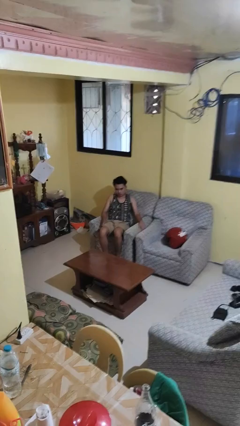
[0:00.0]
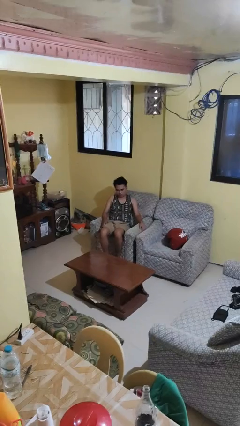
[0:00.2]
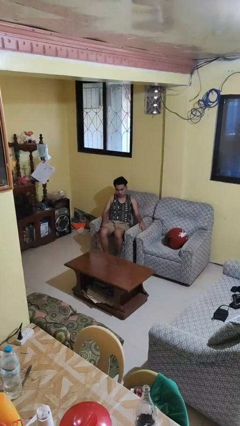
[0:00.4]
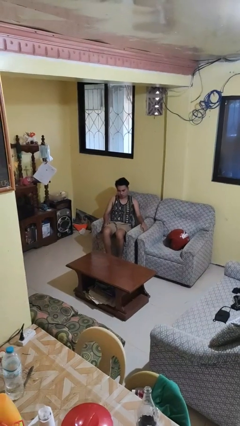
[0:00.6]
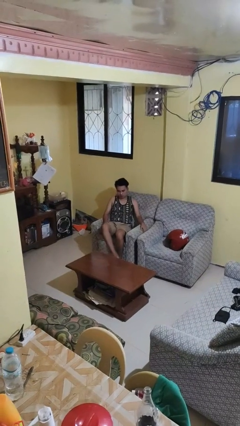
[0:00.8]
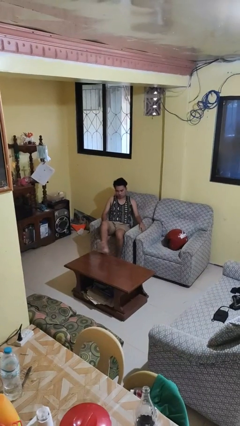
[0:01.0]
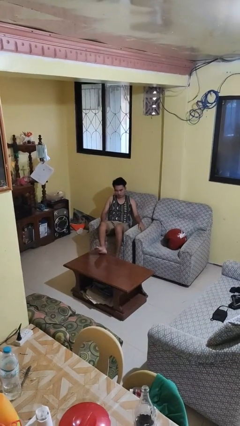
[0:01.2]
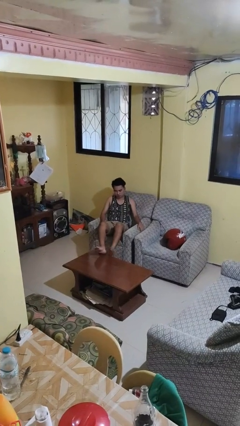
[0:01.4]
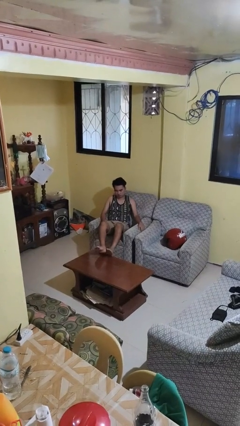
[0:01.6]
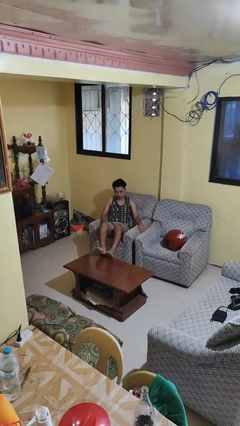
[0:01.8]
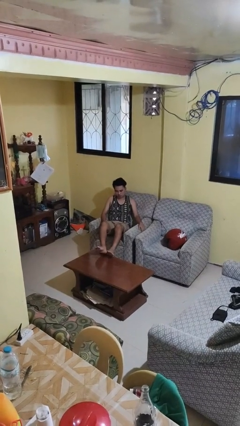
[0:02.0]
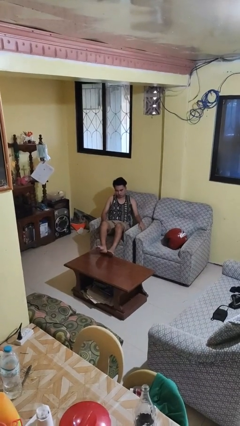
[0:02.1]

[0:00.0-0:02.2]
person puts feet up

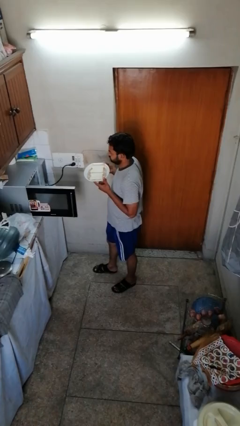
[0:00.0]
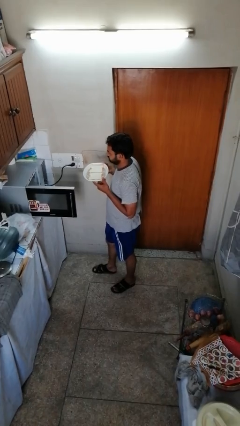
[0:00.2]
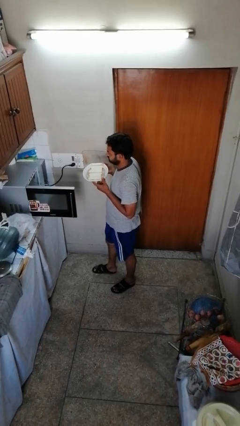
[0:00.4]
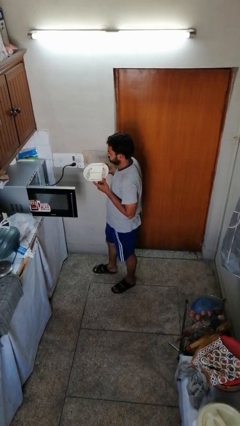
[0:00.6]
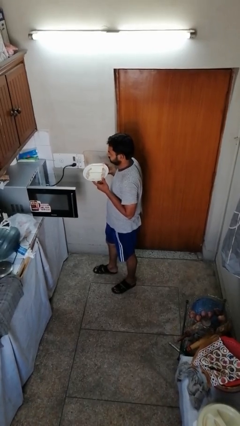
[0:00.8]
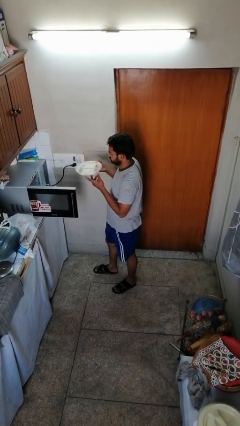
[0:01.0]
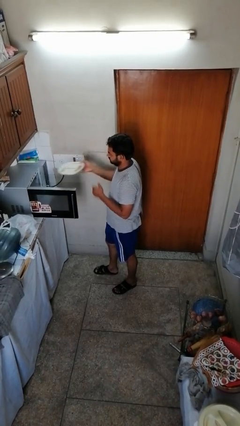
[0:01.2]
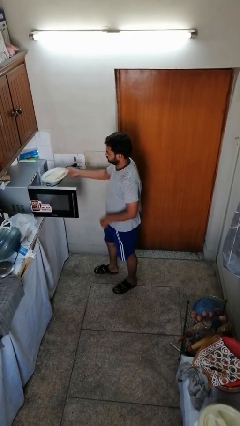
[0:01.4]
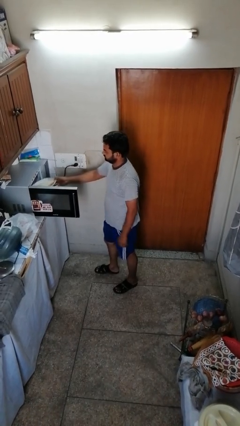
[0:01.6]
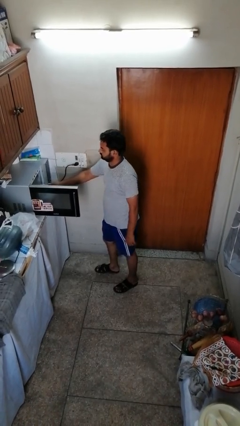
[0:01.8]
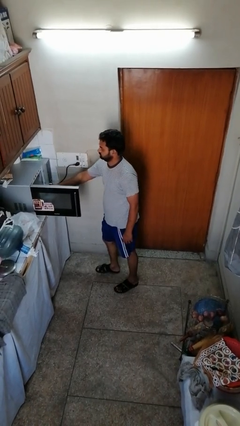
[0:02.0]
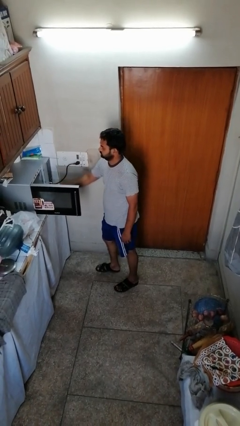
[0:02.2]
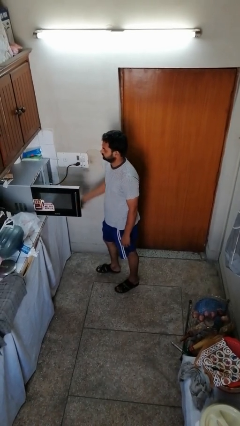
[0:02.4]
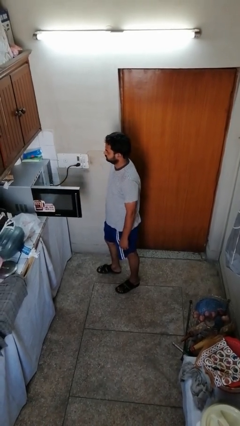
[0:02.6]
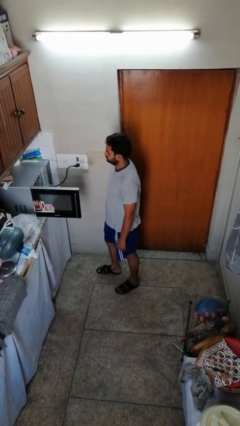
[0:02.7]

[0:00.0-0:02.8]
person puts object into oven

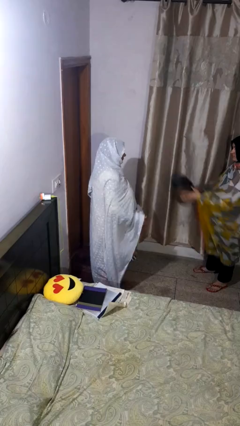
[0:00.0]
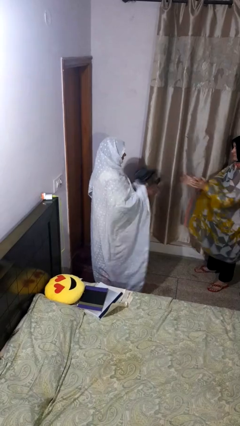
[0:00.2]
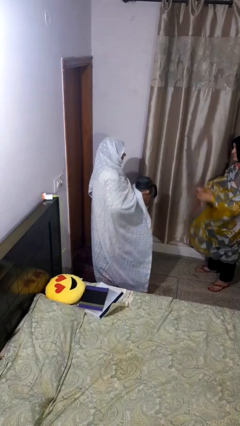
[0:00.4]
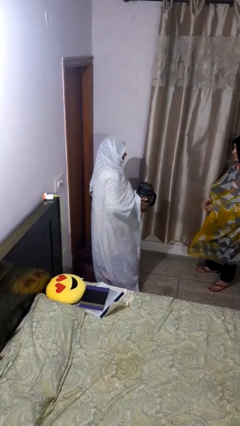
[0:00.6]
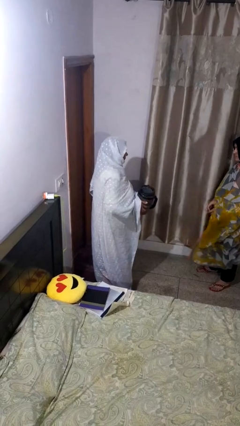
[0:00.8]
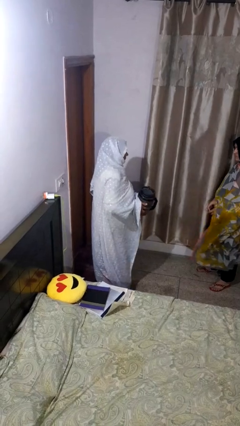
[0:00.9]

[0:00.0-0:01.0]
person catches object from person

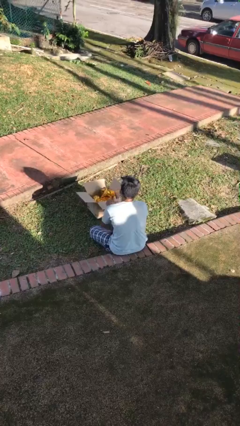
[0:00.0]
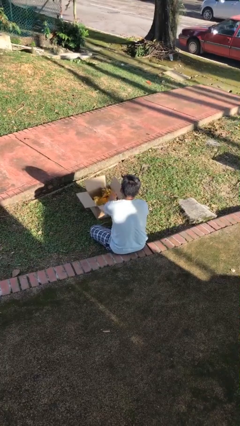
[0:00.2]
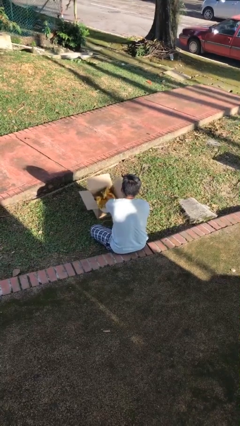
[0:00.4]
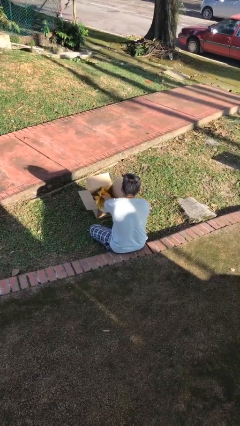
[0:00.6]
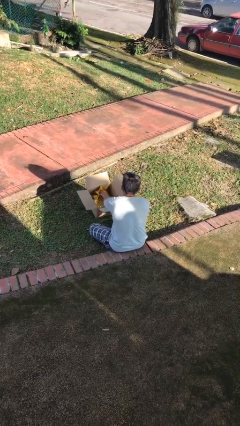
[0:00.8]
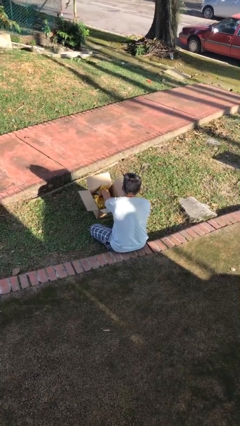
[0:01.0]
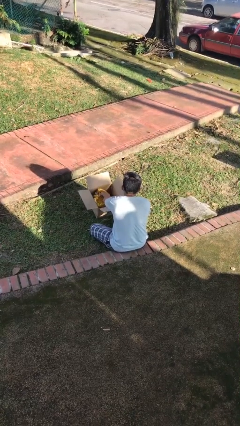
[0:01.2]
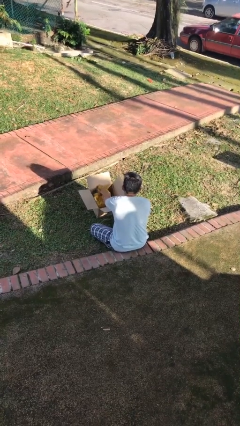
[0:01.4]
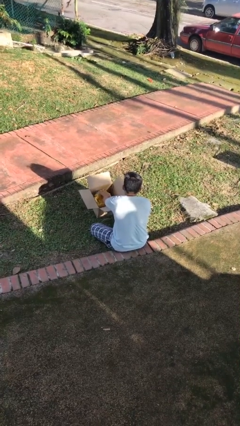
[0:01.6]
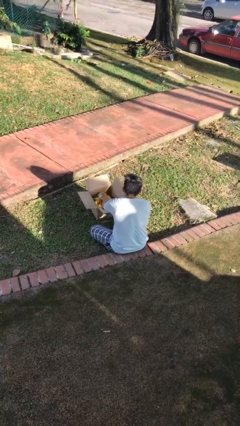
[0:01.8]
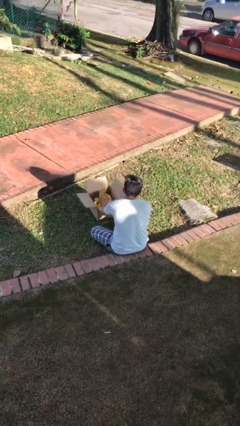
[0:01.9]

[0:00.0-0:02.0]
person searches in box

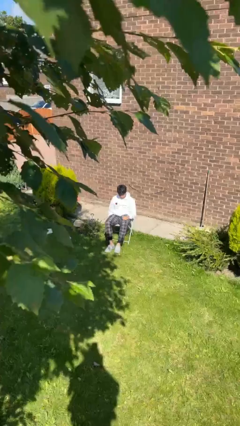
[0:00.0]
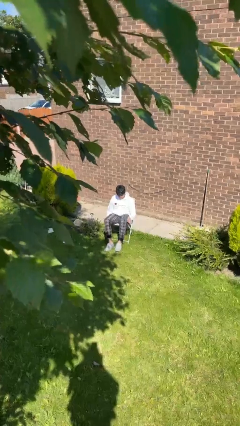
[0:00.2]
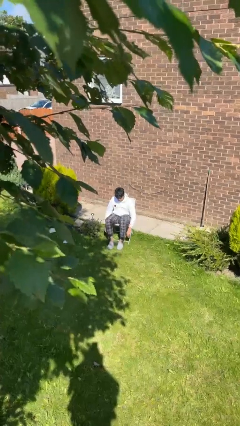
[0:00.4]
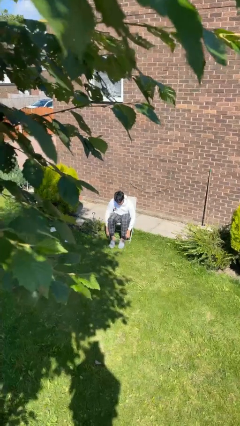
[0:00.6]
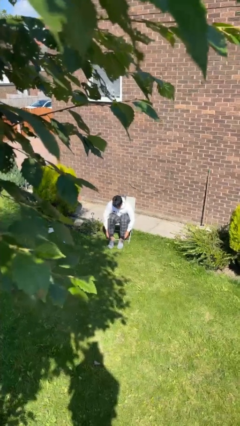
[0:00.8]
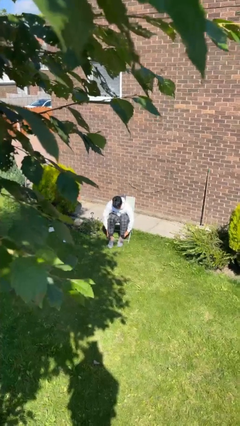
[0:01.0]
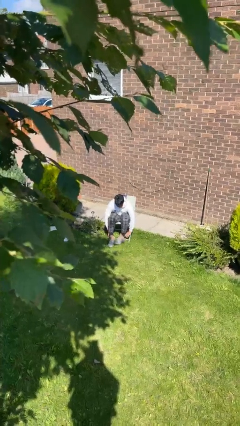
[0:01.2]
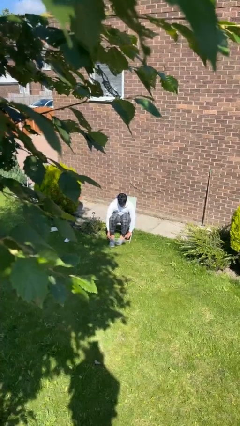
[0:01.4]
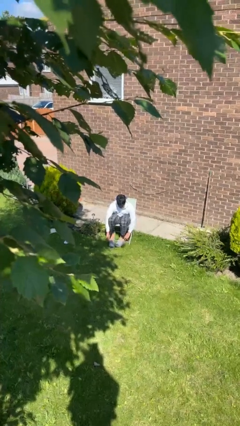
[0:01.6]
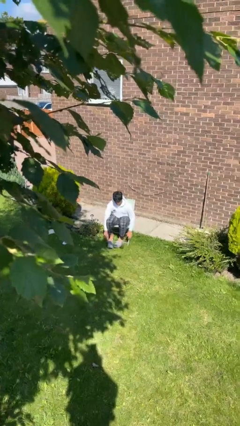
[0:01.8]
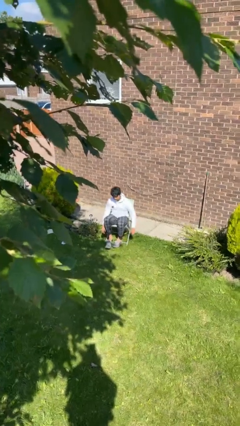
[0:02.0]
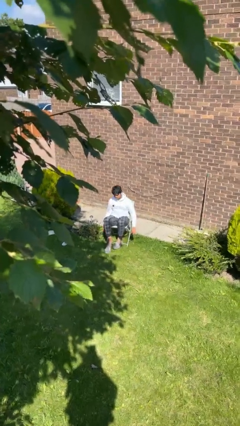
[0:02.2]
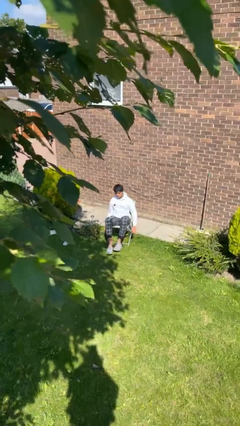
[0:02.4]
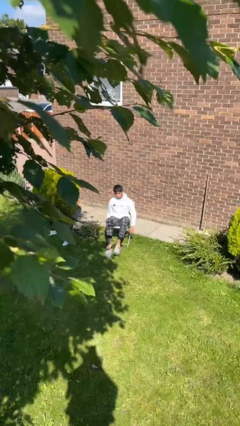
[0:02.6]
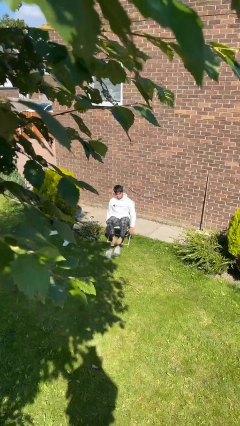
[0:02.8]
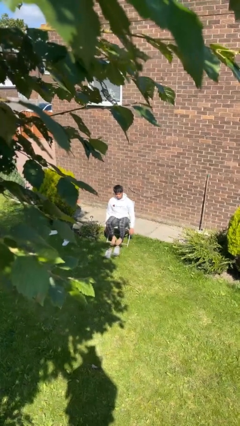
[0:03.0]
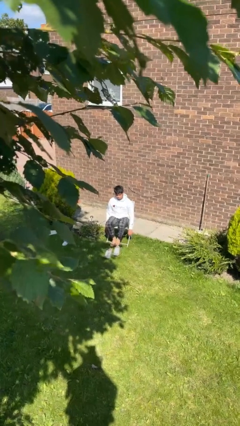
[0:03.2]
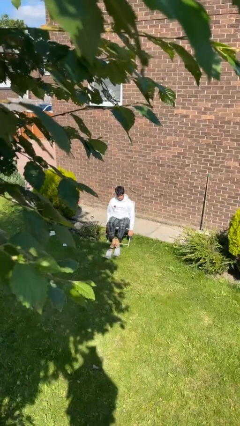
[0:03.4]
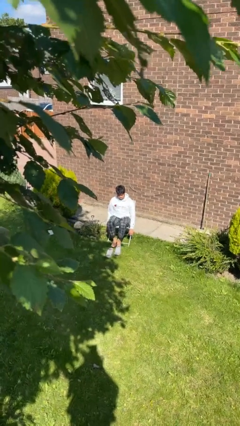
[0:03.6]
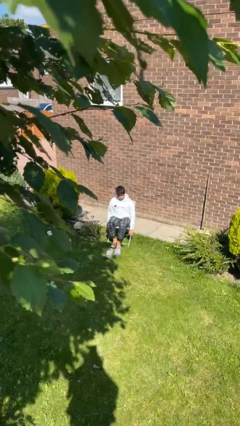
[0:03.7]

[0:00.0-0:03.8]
person takes off shoes

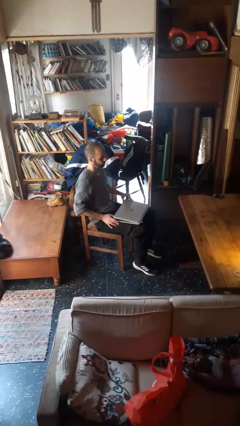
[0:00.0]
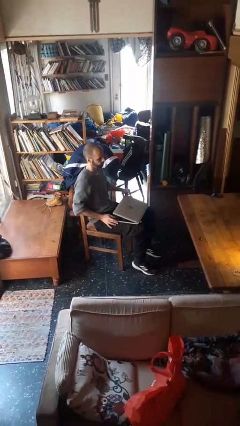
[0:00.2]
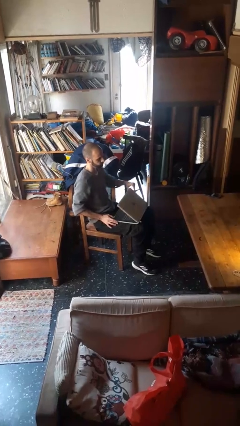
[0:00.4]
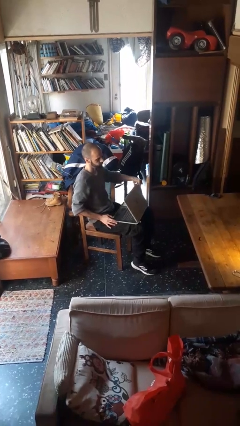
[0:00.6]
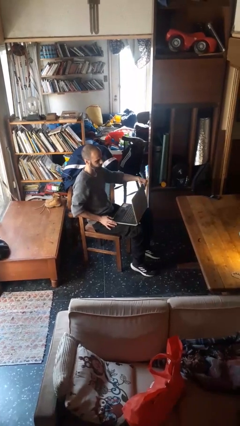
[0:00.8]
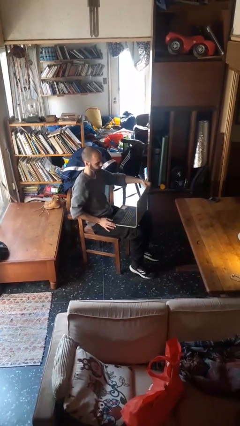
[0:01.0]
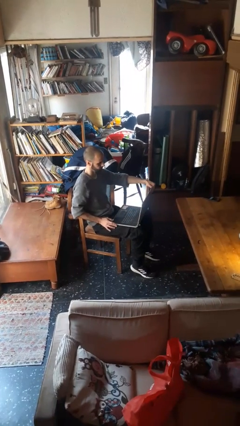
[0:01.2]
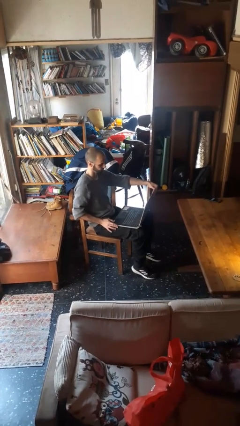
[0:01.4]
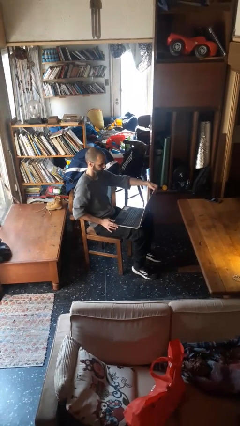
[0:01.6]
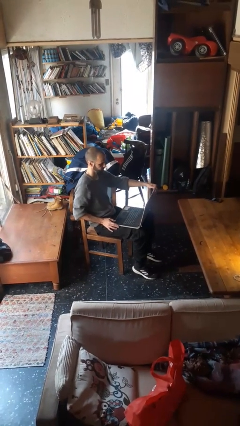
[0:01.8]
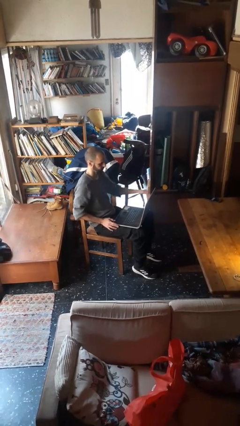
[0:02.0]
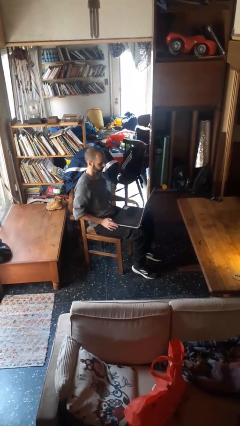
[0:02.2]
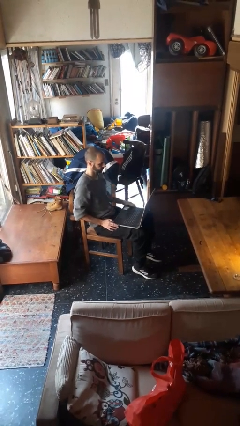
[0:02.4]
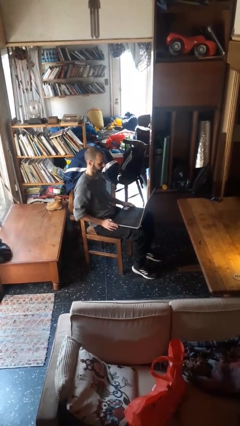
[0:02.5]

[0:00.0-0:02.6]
person opens laptop

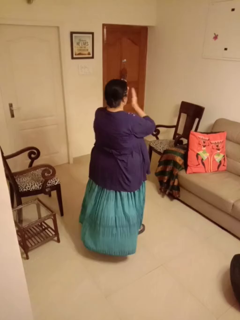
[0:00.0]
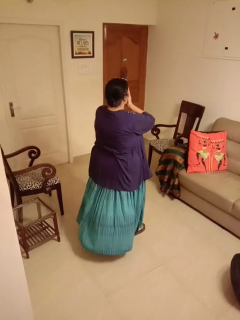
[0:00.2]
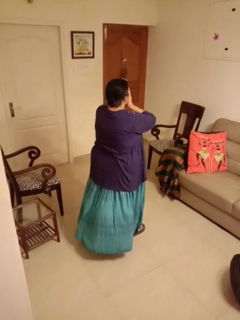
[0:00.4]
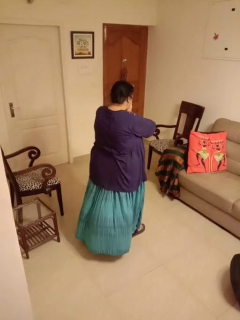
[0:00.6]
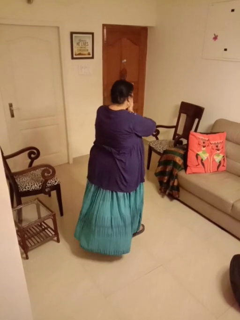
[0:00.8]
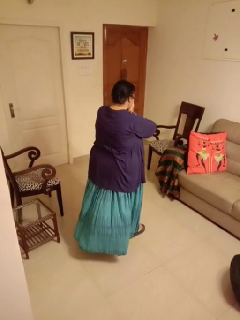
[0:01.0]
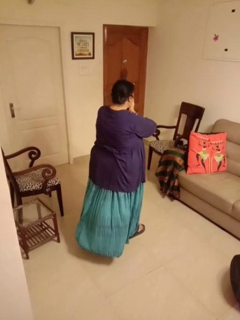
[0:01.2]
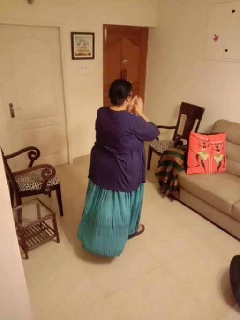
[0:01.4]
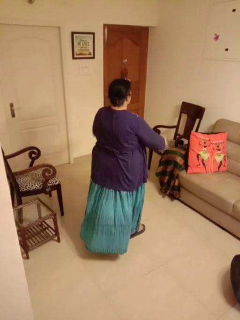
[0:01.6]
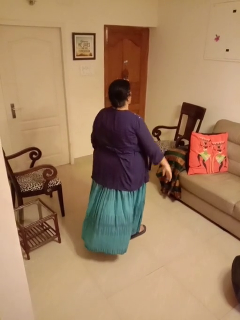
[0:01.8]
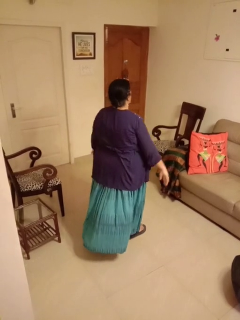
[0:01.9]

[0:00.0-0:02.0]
person sneezes into hand

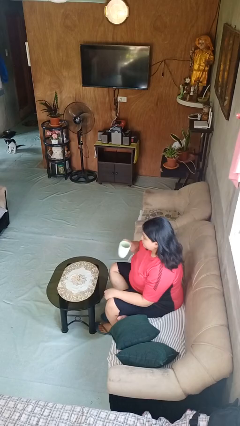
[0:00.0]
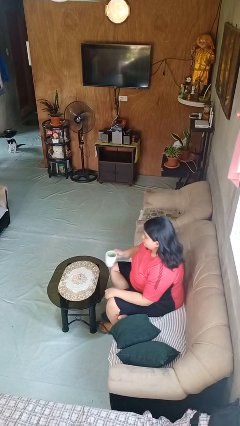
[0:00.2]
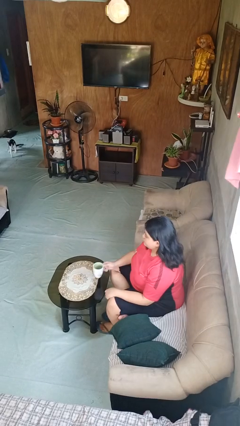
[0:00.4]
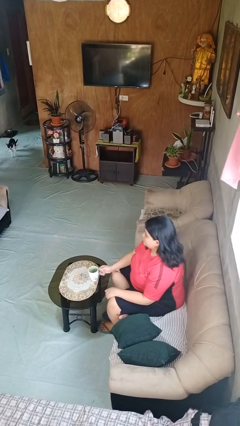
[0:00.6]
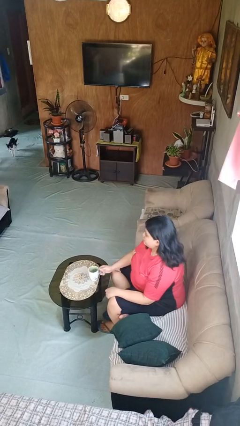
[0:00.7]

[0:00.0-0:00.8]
person puts down object on table
